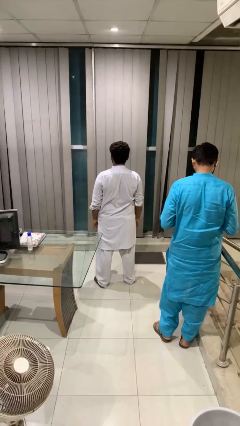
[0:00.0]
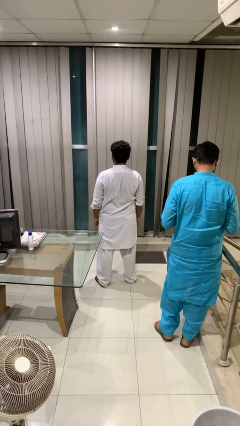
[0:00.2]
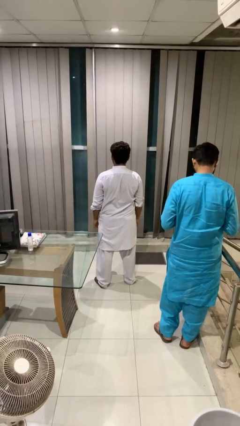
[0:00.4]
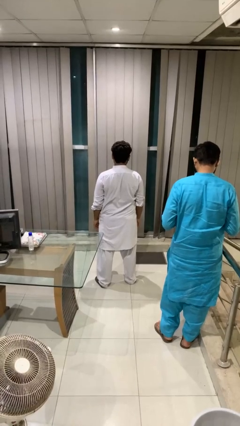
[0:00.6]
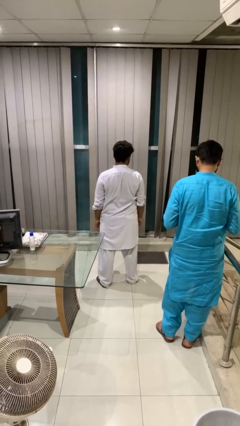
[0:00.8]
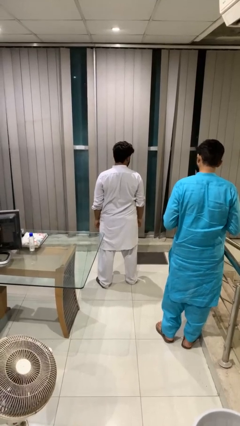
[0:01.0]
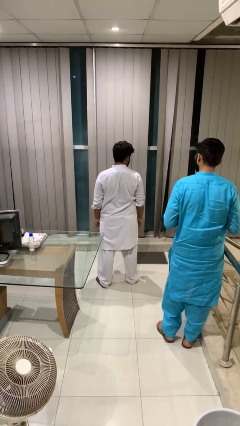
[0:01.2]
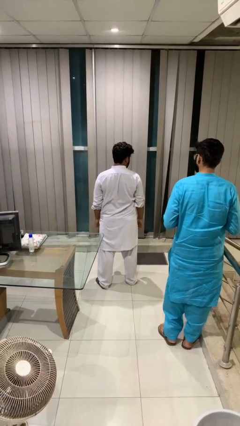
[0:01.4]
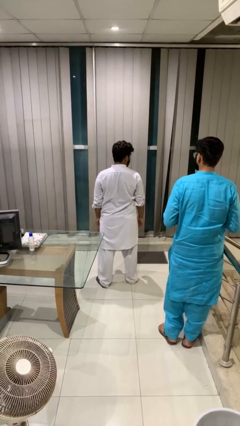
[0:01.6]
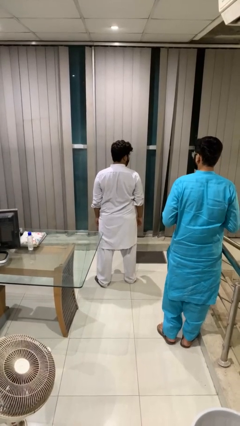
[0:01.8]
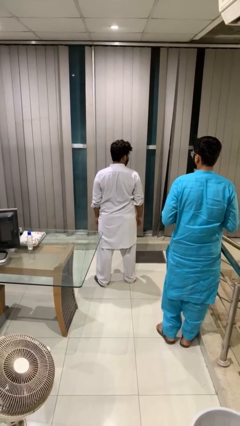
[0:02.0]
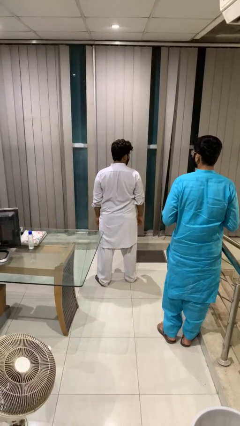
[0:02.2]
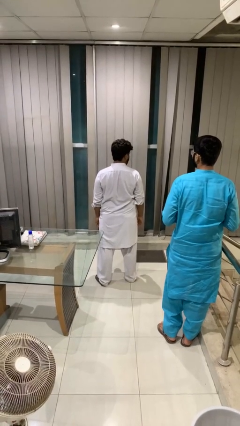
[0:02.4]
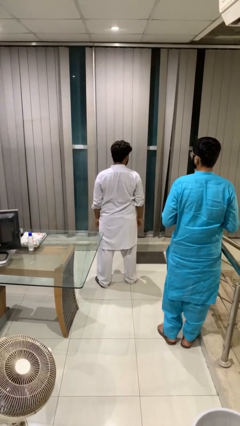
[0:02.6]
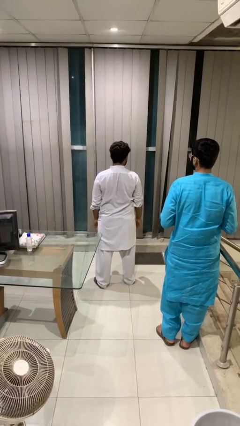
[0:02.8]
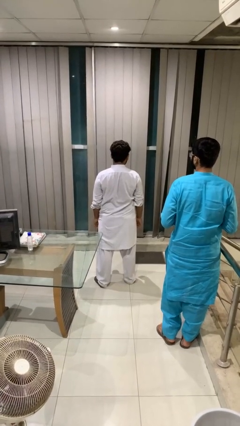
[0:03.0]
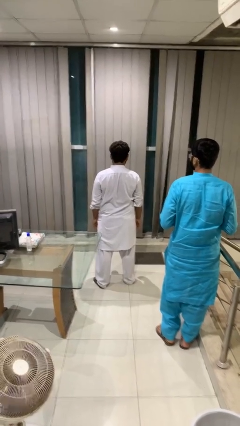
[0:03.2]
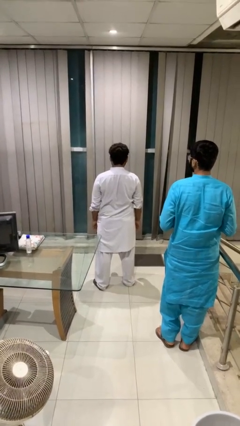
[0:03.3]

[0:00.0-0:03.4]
person looks over shoulder

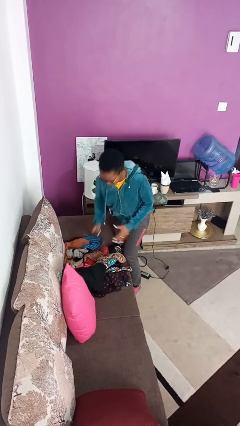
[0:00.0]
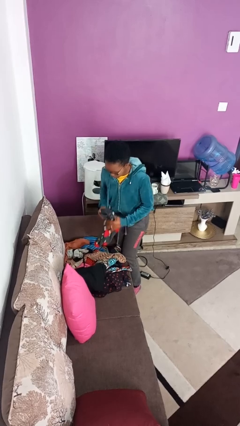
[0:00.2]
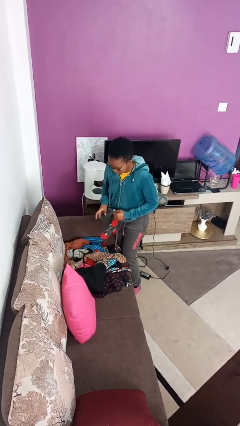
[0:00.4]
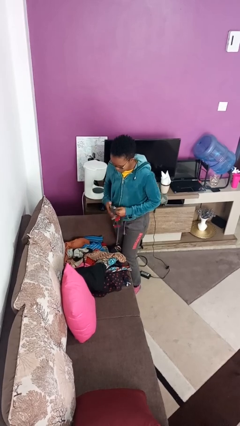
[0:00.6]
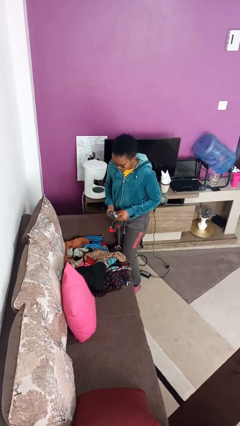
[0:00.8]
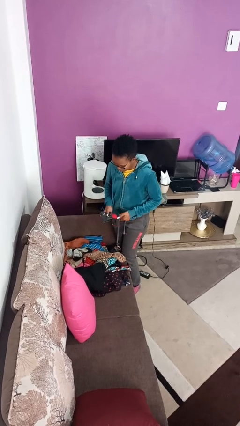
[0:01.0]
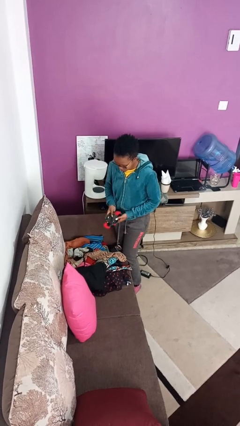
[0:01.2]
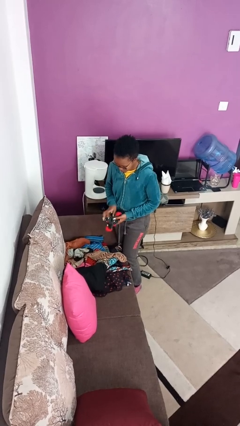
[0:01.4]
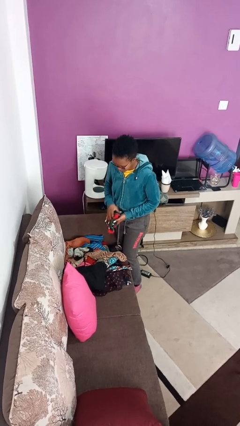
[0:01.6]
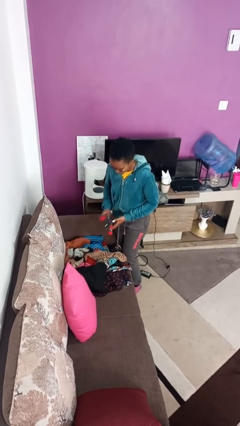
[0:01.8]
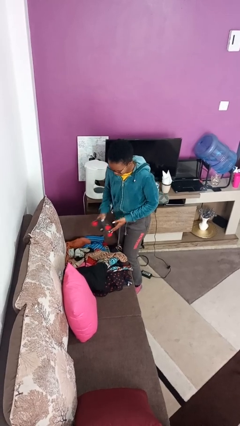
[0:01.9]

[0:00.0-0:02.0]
person folds socks

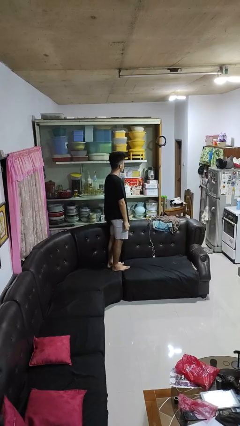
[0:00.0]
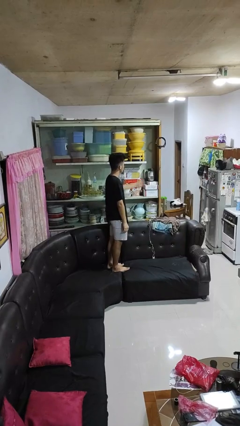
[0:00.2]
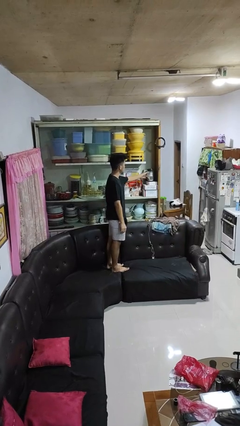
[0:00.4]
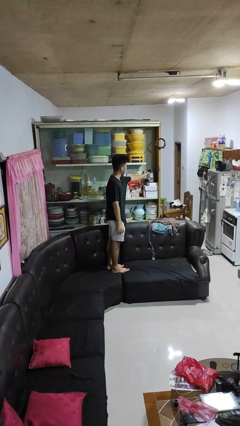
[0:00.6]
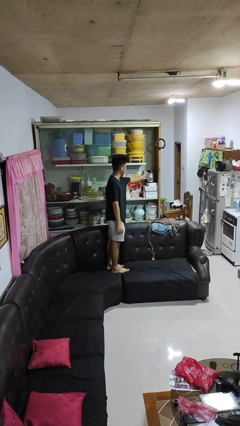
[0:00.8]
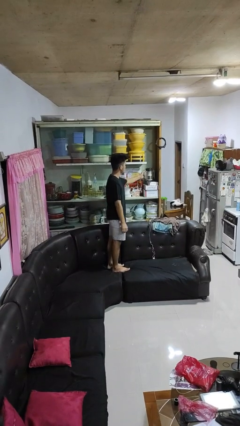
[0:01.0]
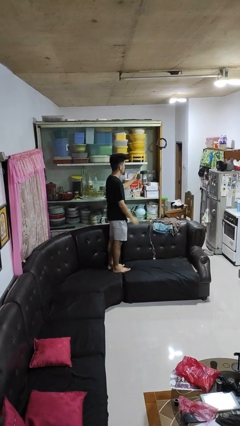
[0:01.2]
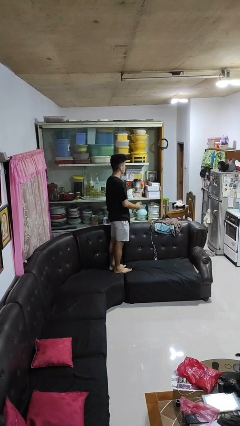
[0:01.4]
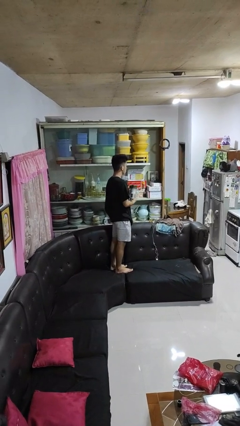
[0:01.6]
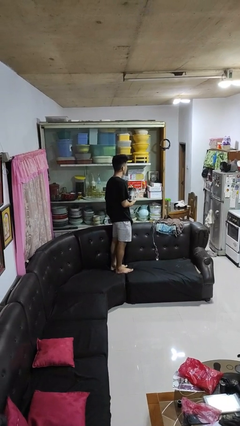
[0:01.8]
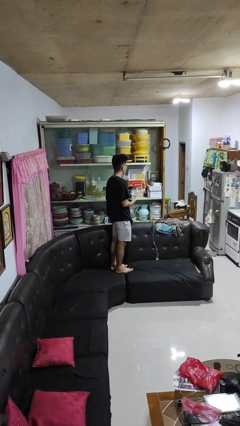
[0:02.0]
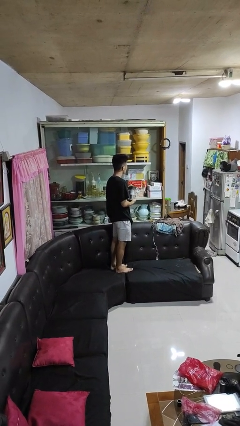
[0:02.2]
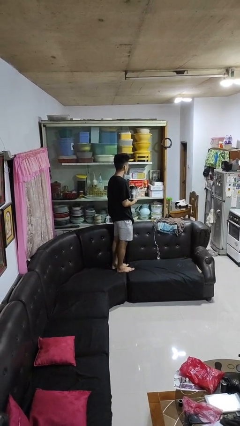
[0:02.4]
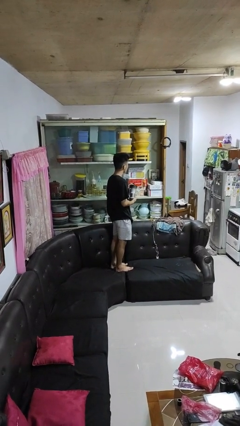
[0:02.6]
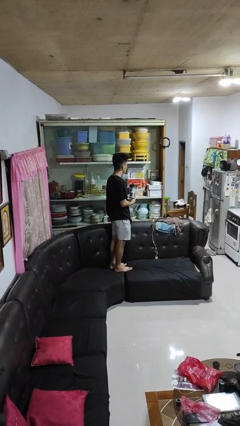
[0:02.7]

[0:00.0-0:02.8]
person picks up object from cabinet

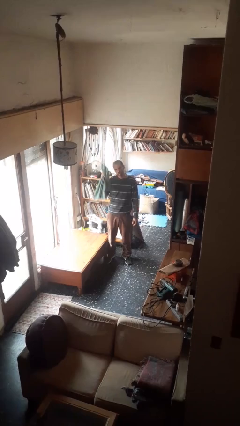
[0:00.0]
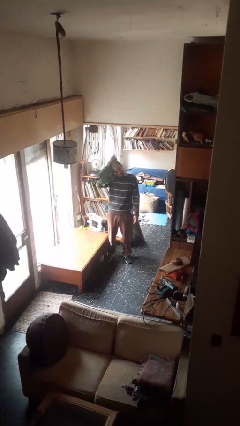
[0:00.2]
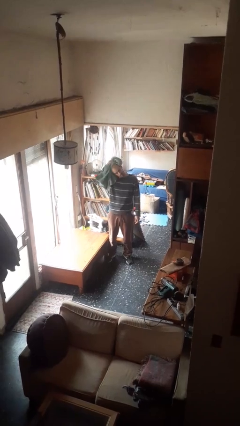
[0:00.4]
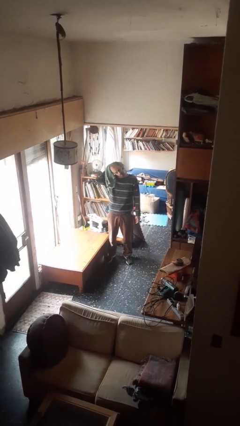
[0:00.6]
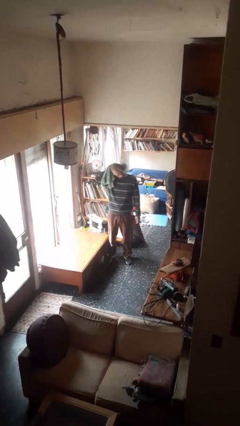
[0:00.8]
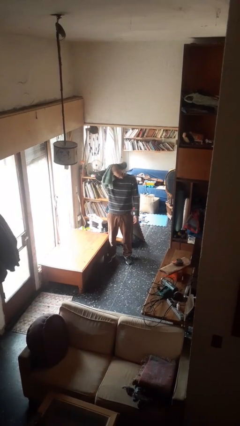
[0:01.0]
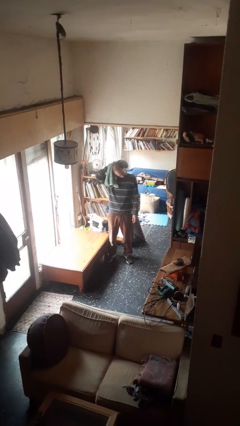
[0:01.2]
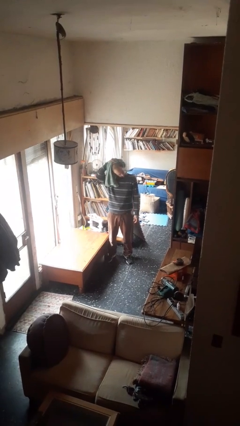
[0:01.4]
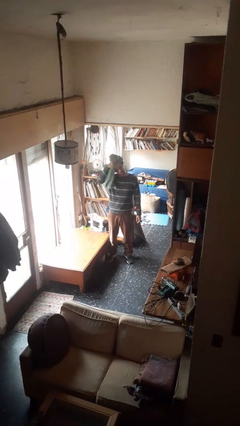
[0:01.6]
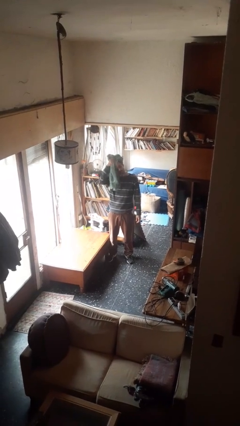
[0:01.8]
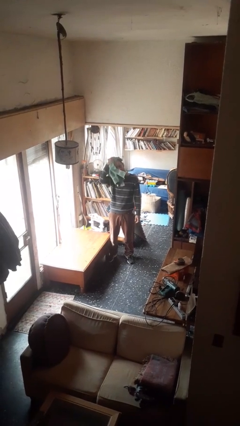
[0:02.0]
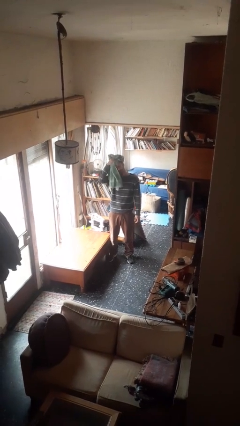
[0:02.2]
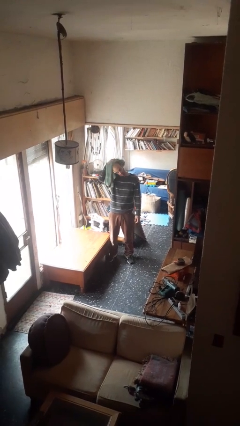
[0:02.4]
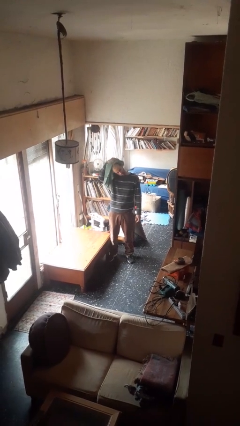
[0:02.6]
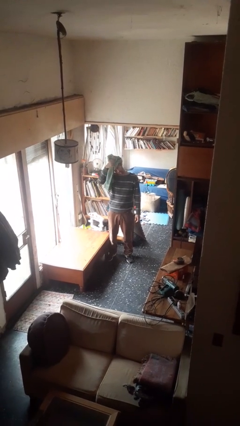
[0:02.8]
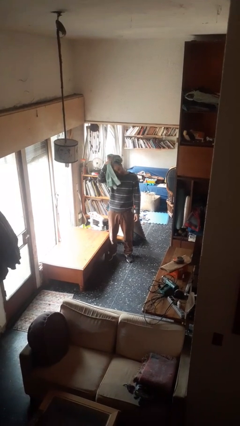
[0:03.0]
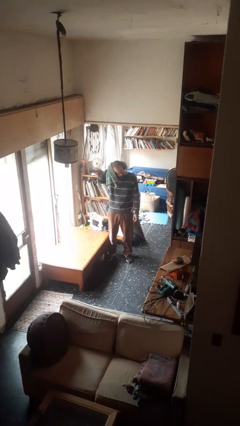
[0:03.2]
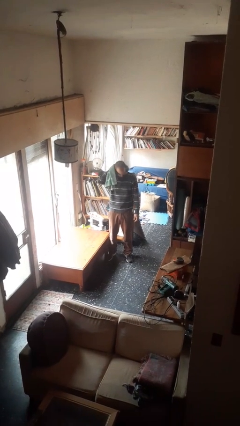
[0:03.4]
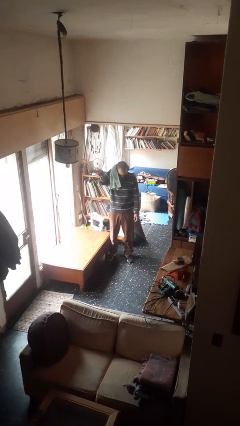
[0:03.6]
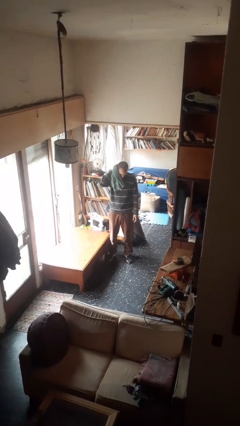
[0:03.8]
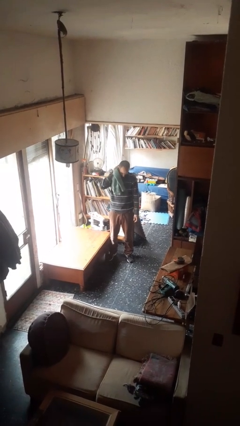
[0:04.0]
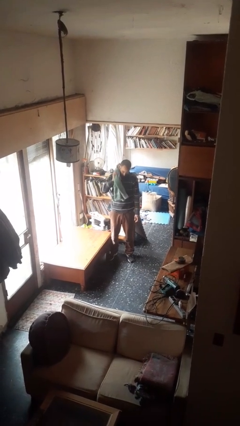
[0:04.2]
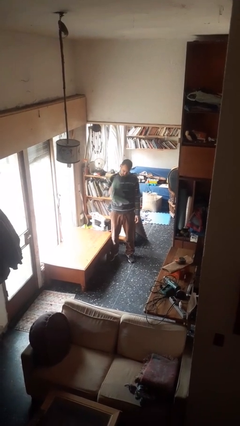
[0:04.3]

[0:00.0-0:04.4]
person dries hair with towel

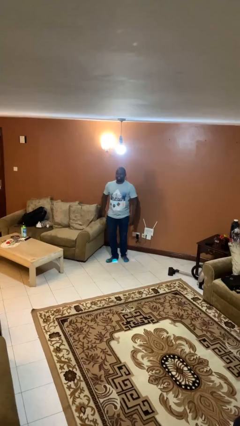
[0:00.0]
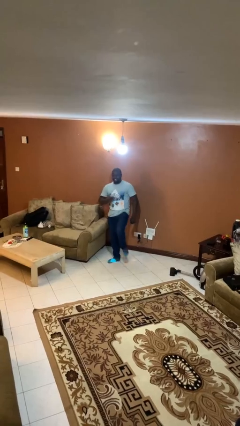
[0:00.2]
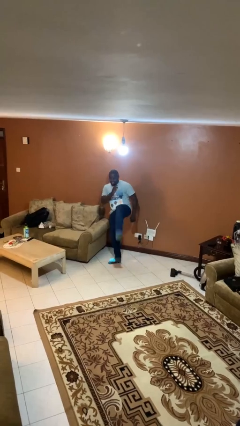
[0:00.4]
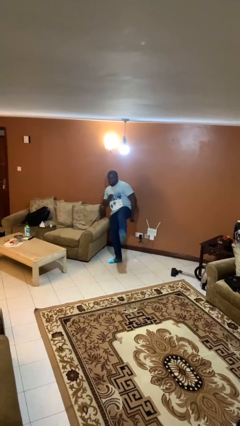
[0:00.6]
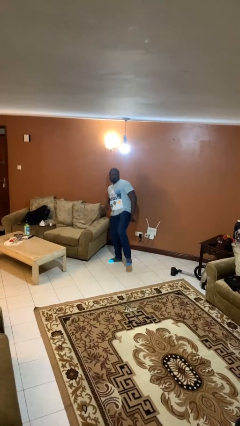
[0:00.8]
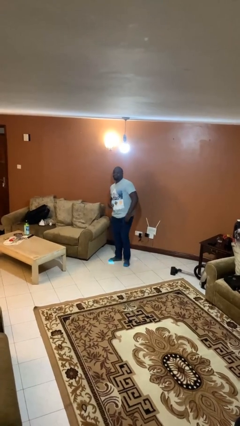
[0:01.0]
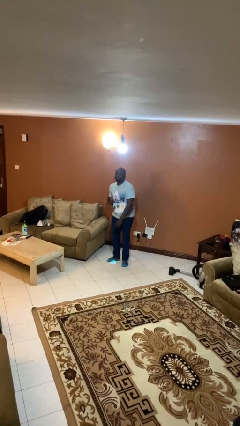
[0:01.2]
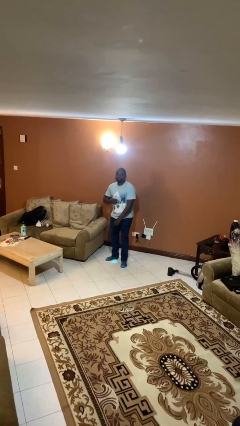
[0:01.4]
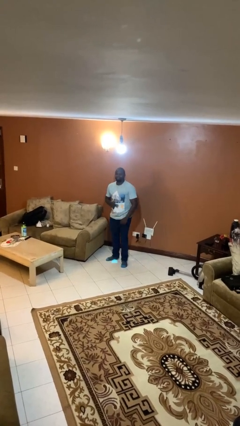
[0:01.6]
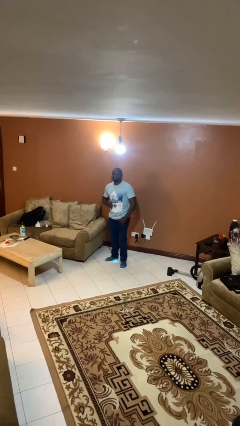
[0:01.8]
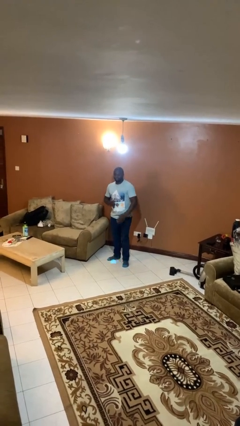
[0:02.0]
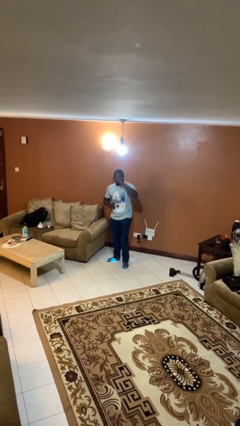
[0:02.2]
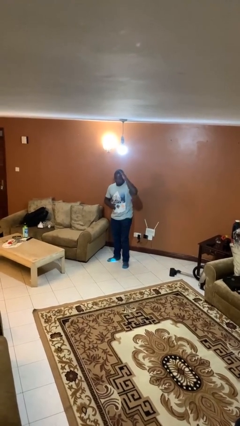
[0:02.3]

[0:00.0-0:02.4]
person karate kicks

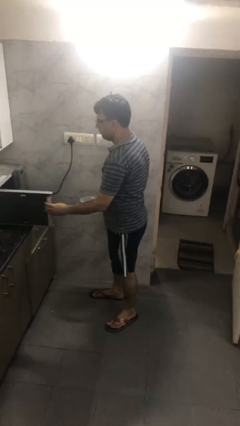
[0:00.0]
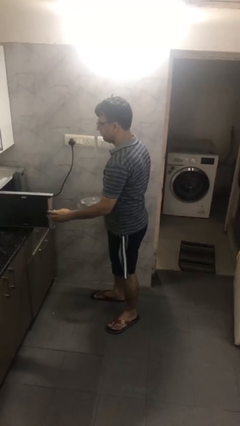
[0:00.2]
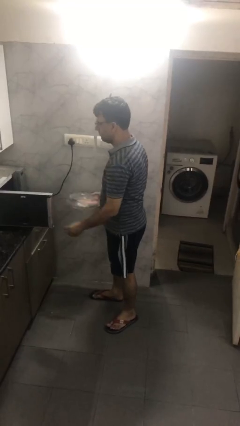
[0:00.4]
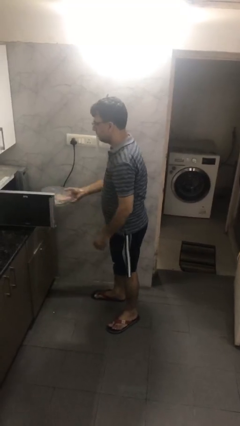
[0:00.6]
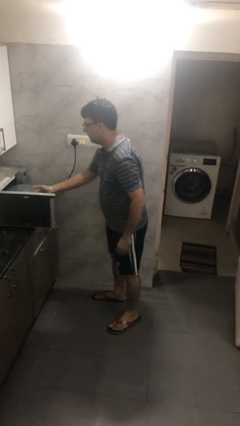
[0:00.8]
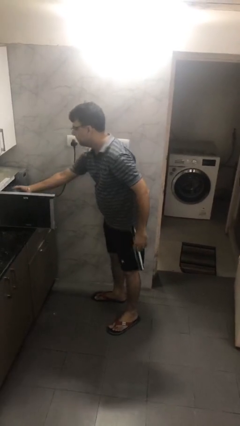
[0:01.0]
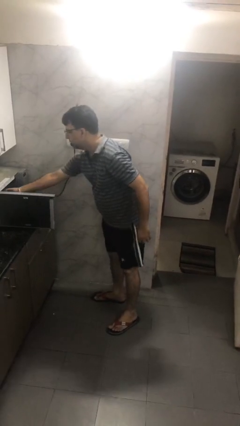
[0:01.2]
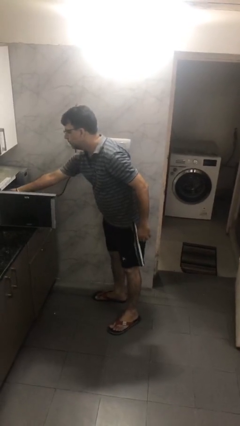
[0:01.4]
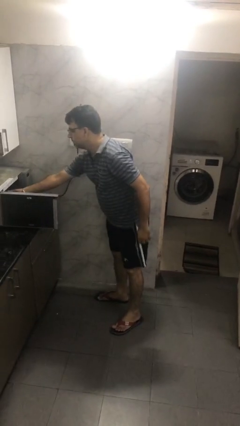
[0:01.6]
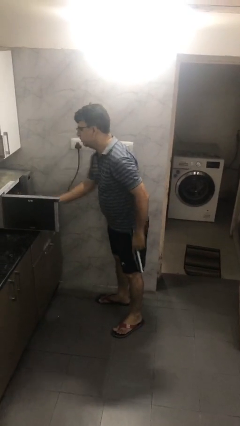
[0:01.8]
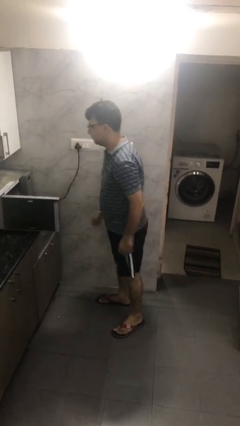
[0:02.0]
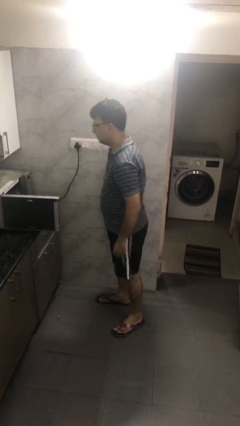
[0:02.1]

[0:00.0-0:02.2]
person puts object into microwave
